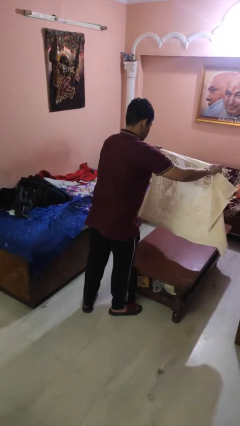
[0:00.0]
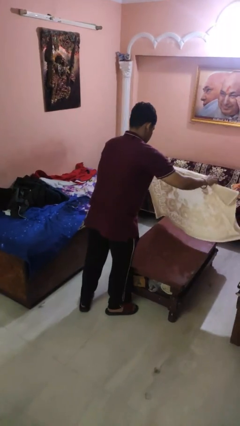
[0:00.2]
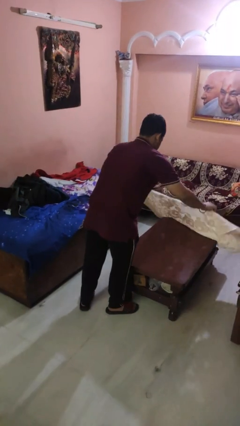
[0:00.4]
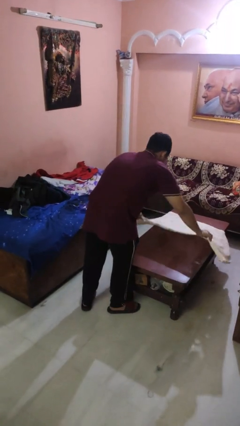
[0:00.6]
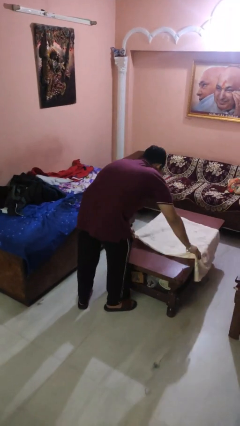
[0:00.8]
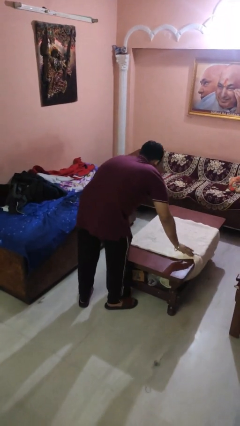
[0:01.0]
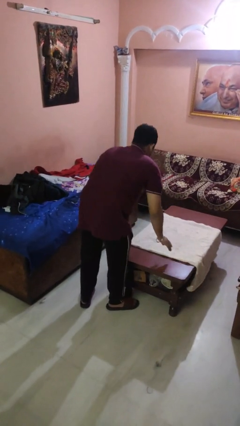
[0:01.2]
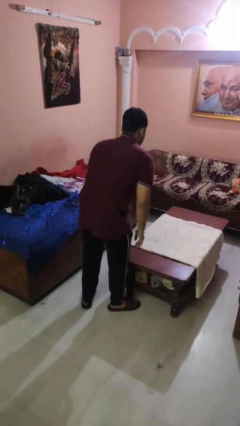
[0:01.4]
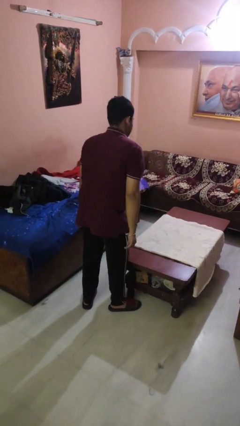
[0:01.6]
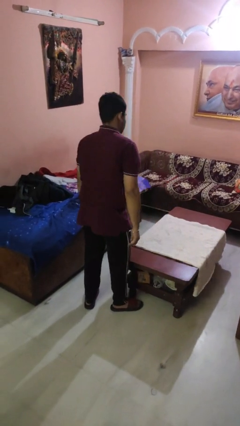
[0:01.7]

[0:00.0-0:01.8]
person spreads tablecloth

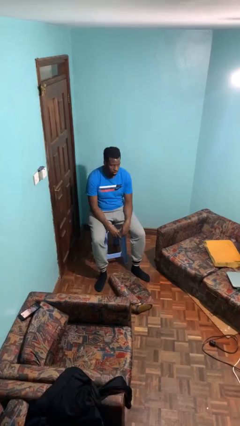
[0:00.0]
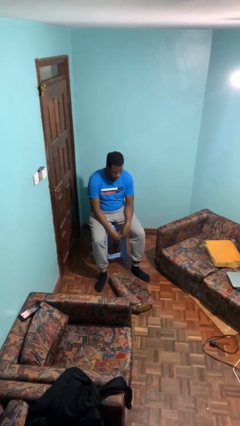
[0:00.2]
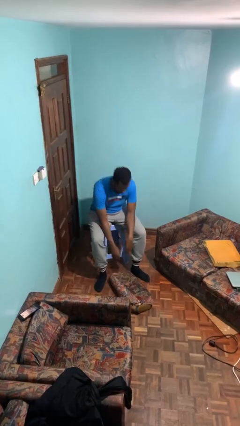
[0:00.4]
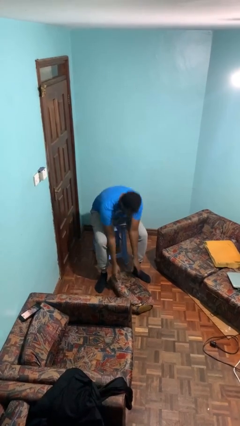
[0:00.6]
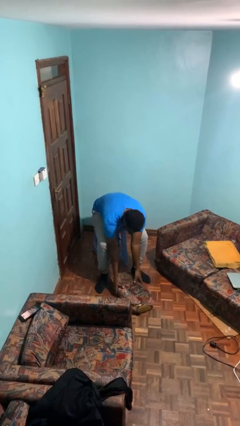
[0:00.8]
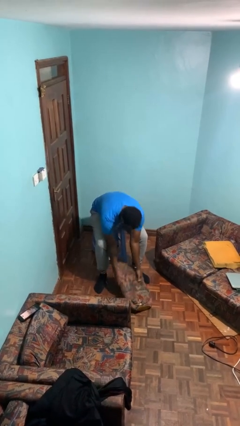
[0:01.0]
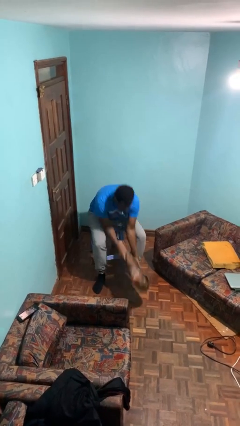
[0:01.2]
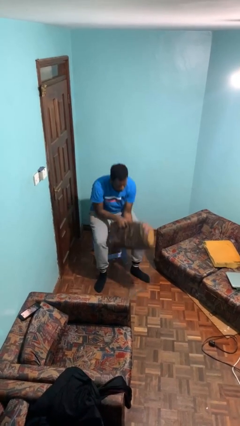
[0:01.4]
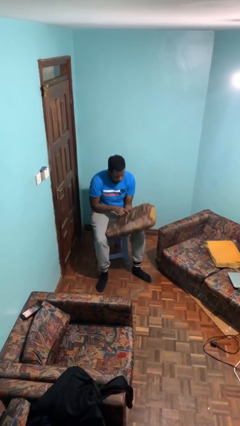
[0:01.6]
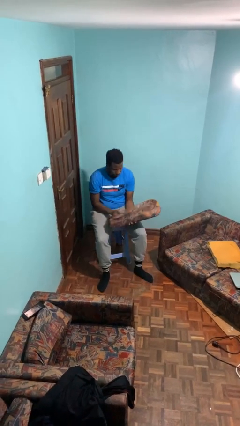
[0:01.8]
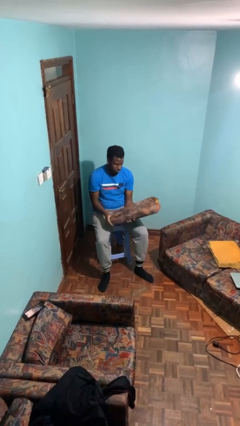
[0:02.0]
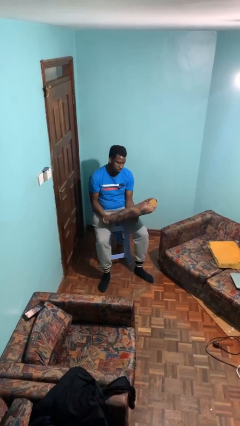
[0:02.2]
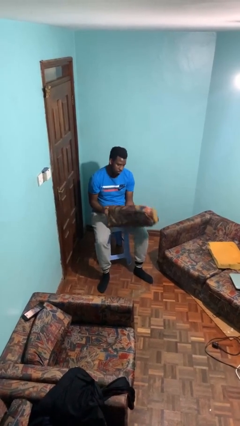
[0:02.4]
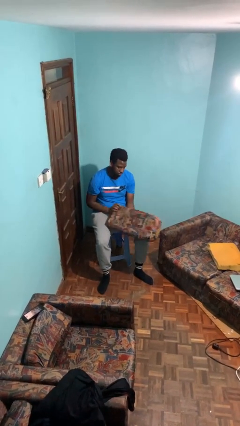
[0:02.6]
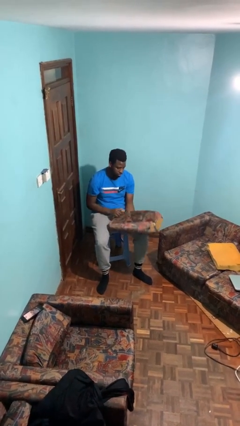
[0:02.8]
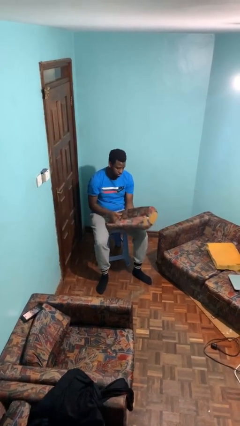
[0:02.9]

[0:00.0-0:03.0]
person picks up object from floor

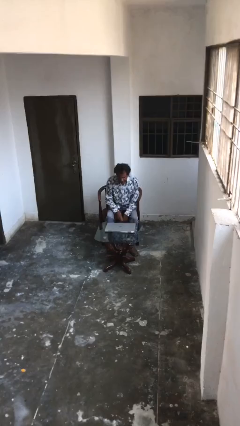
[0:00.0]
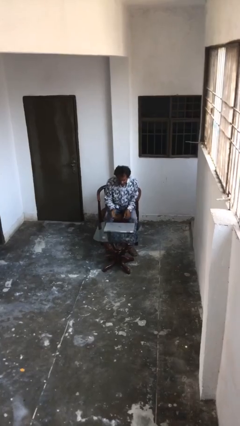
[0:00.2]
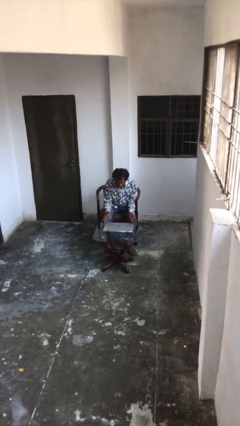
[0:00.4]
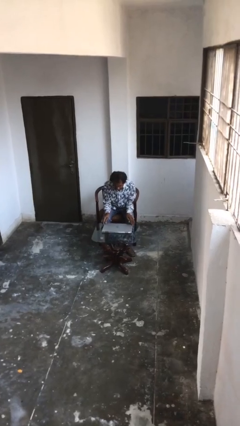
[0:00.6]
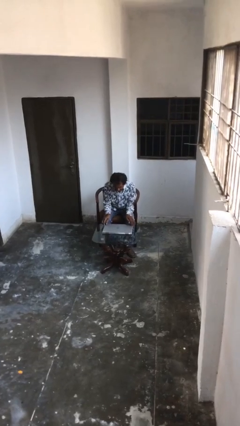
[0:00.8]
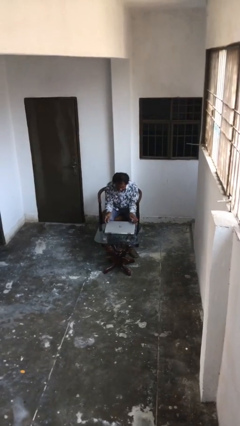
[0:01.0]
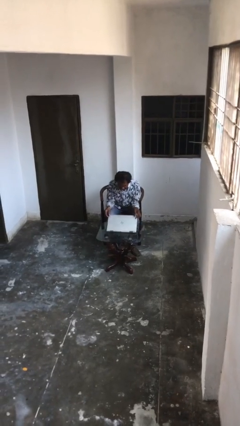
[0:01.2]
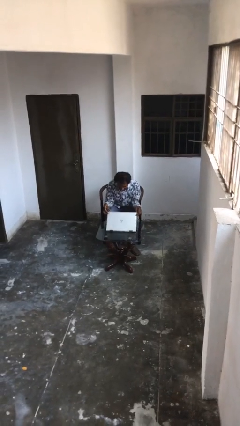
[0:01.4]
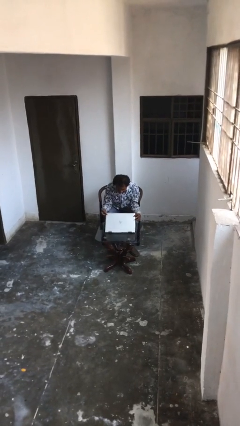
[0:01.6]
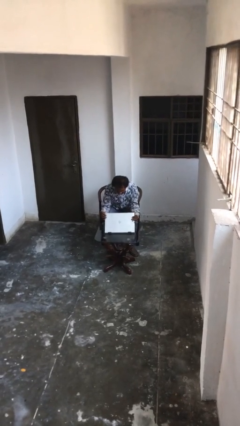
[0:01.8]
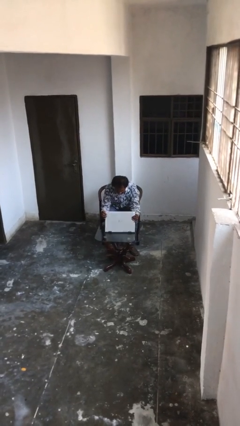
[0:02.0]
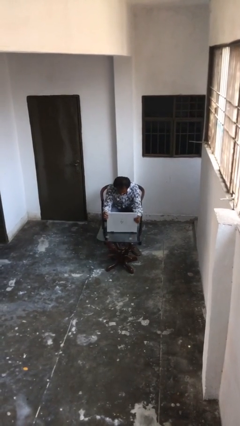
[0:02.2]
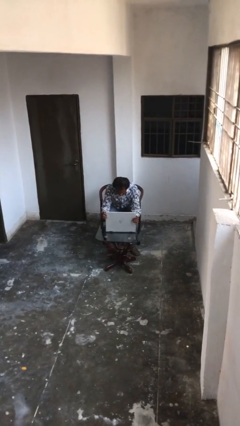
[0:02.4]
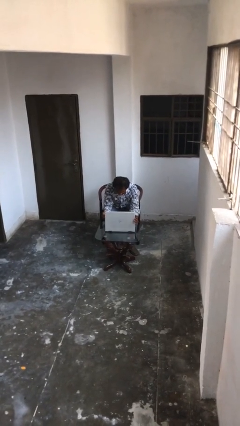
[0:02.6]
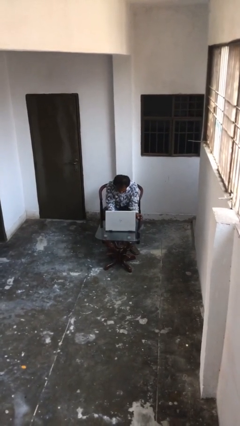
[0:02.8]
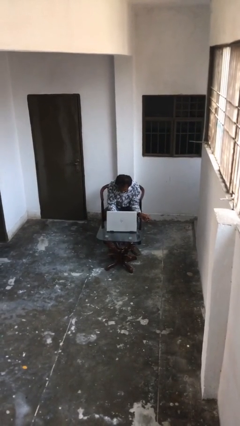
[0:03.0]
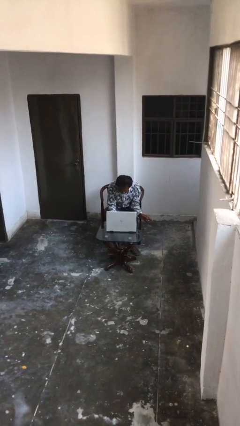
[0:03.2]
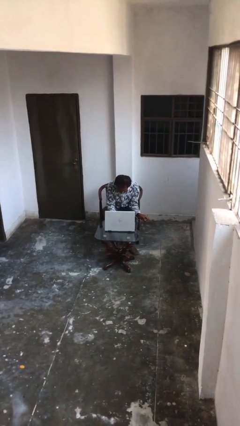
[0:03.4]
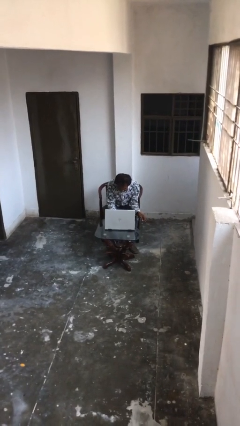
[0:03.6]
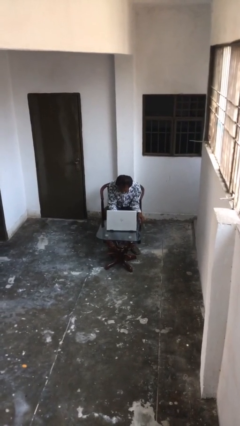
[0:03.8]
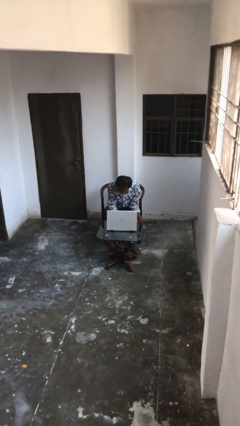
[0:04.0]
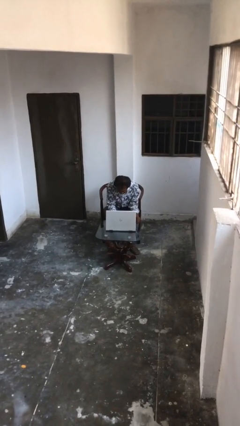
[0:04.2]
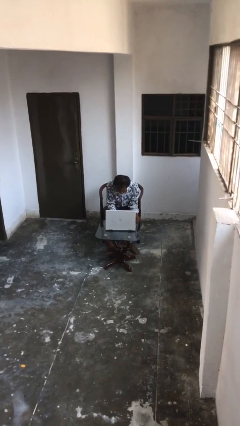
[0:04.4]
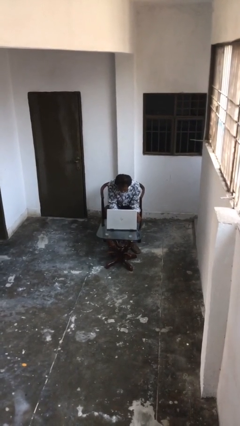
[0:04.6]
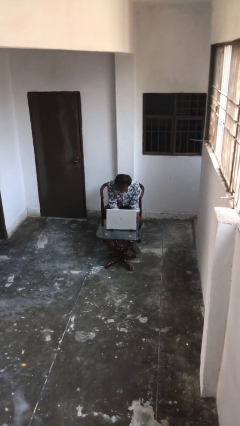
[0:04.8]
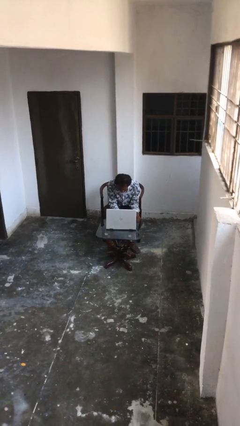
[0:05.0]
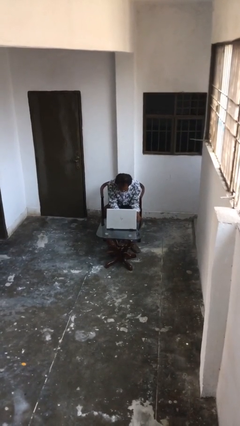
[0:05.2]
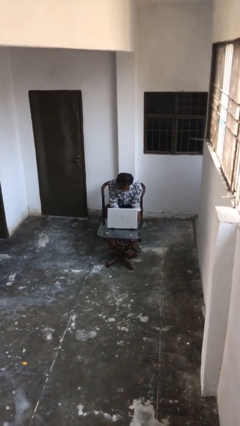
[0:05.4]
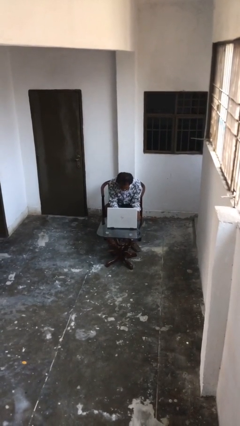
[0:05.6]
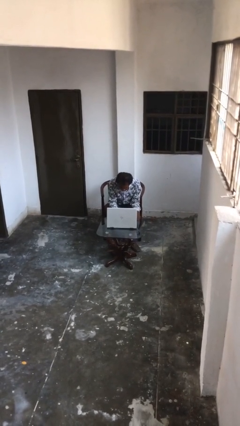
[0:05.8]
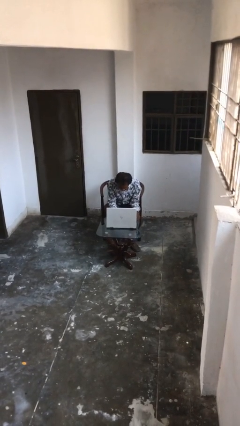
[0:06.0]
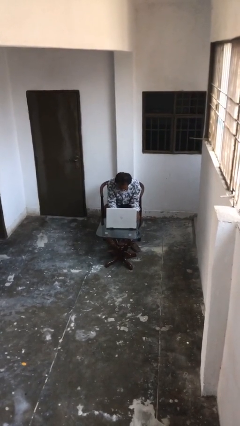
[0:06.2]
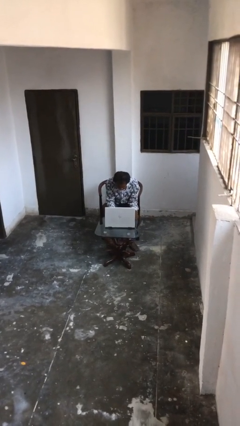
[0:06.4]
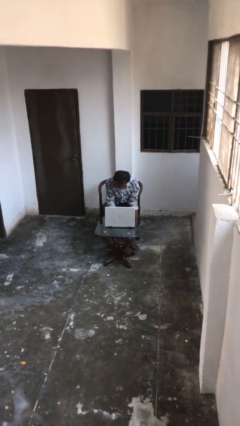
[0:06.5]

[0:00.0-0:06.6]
person interacts with laptop

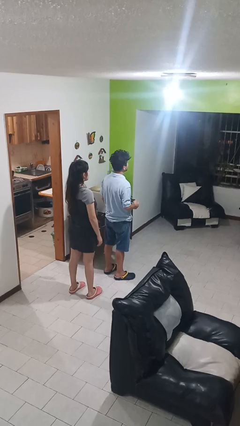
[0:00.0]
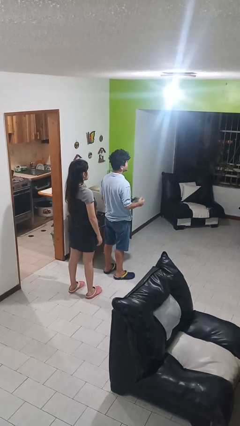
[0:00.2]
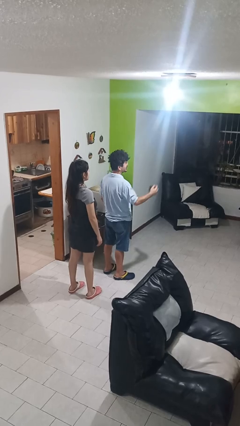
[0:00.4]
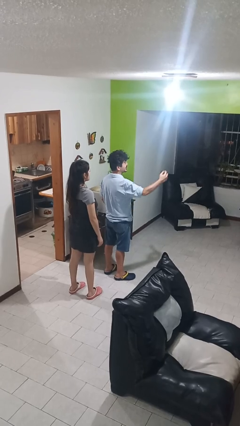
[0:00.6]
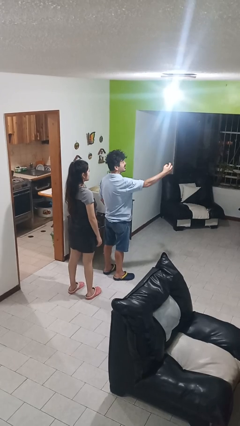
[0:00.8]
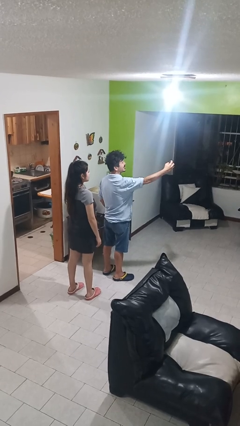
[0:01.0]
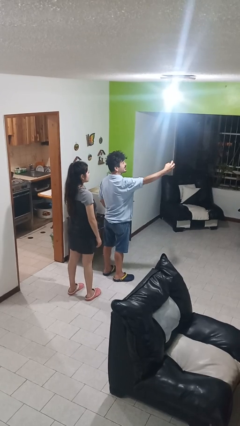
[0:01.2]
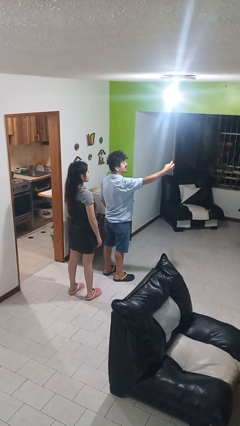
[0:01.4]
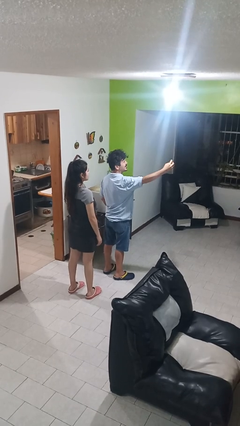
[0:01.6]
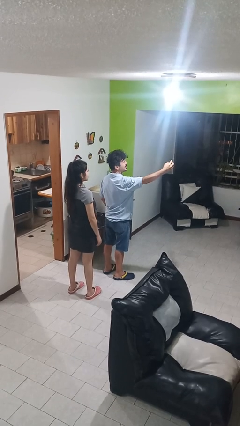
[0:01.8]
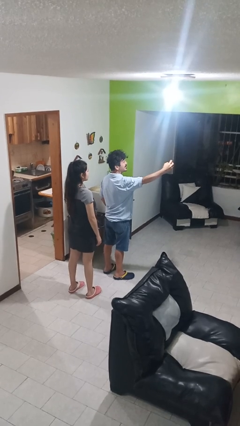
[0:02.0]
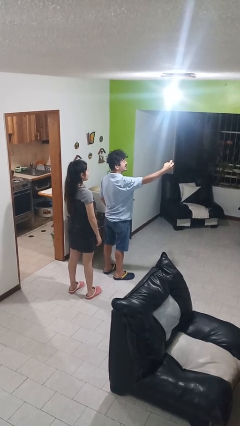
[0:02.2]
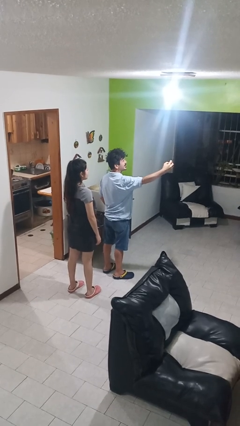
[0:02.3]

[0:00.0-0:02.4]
person takes selfie with person

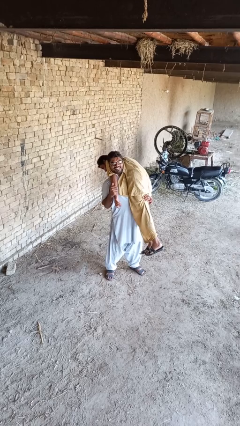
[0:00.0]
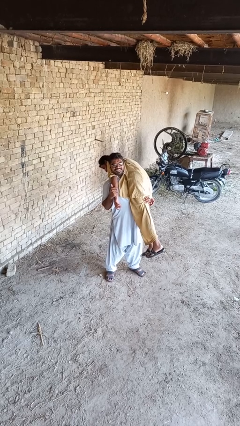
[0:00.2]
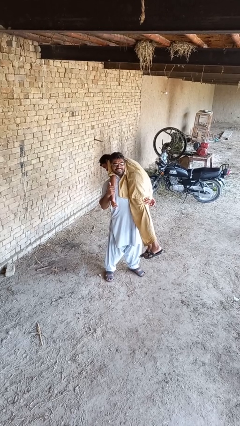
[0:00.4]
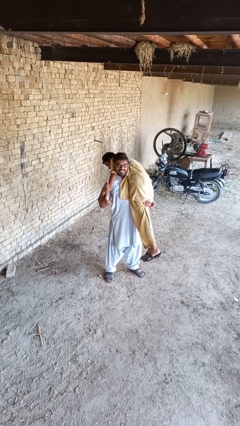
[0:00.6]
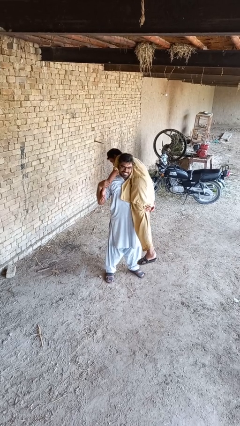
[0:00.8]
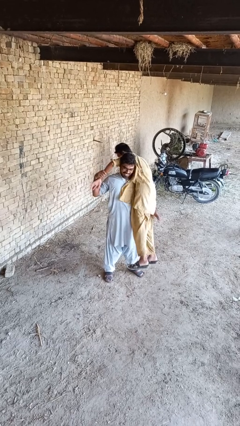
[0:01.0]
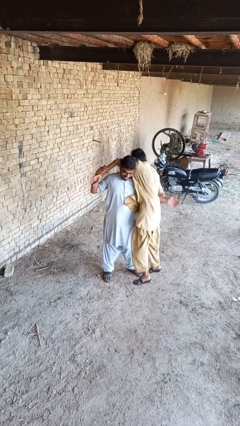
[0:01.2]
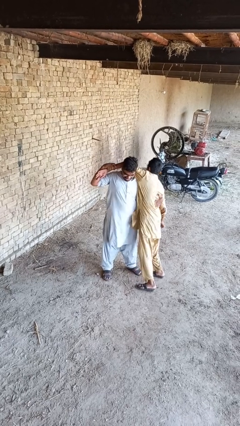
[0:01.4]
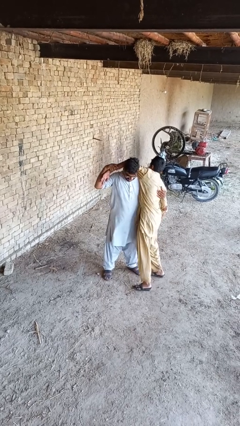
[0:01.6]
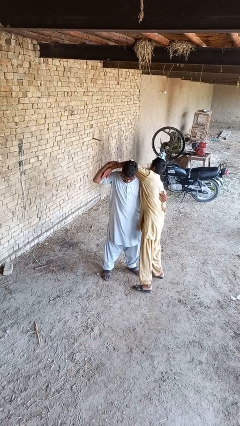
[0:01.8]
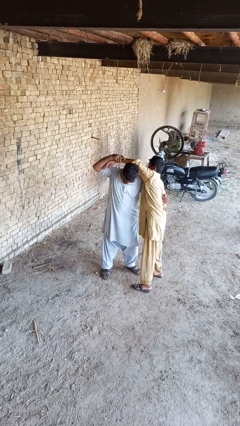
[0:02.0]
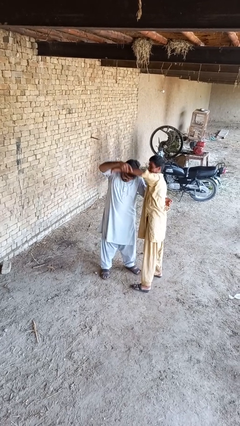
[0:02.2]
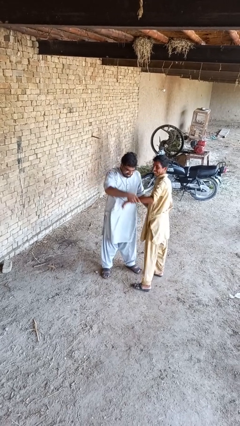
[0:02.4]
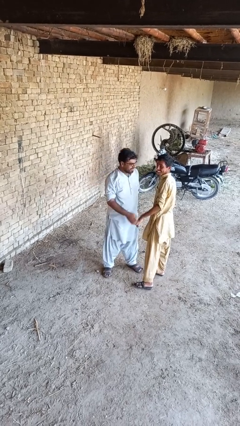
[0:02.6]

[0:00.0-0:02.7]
person puts down person

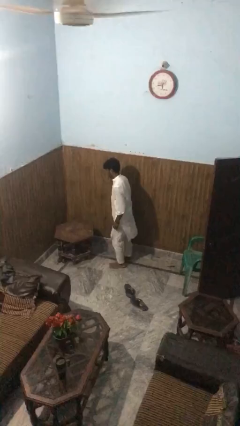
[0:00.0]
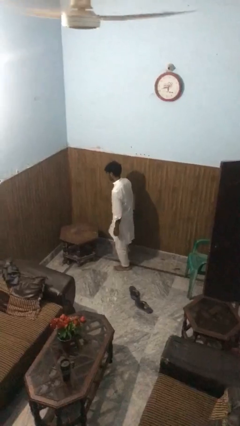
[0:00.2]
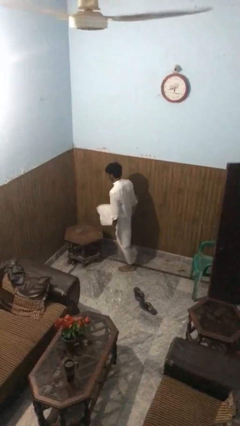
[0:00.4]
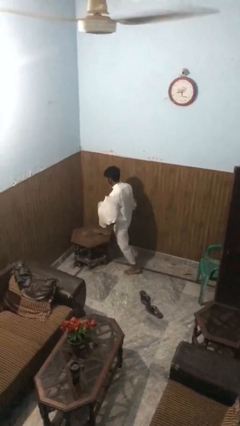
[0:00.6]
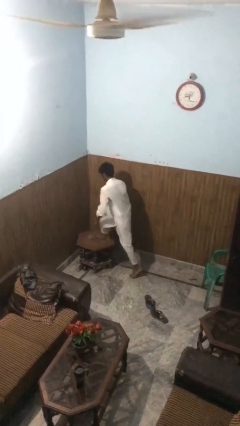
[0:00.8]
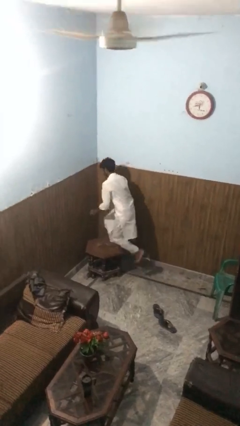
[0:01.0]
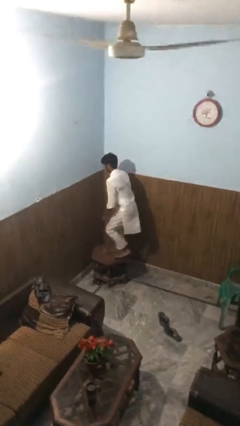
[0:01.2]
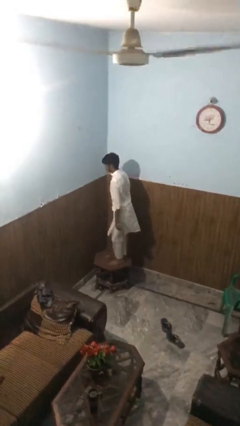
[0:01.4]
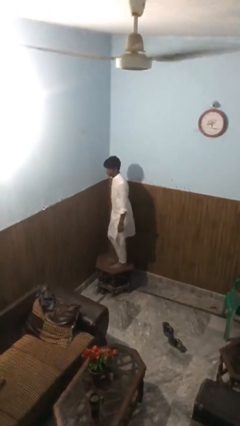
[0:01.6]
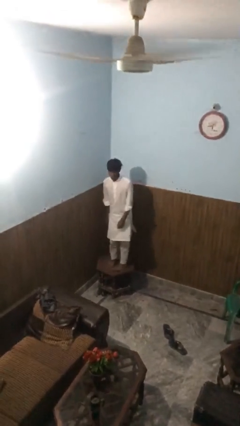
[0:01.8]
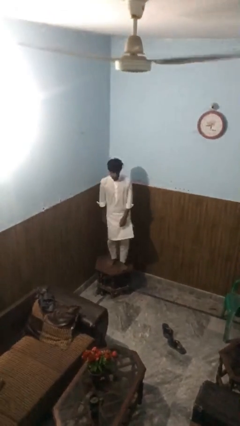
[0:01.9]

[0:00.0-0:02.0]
person climbs on table
